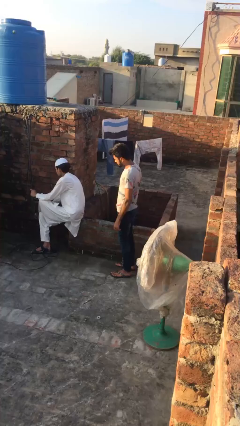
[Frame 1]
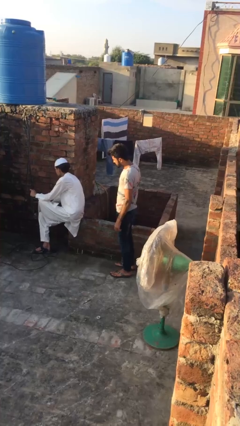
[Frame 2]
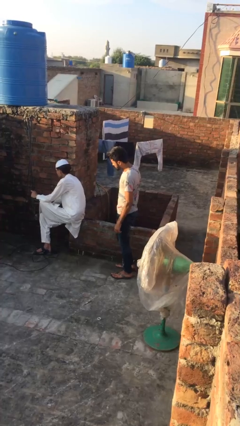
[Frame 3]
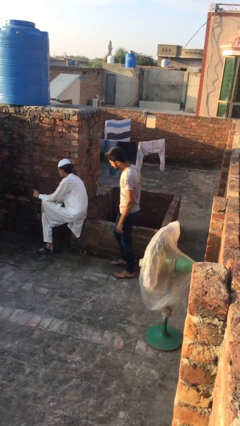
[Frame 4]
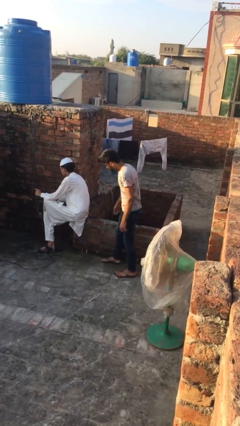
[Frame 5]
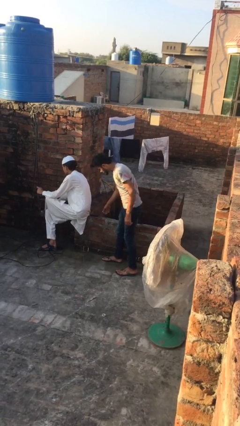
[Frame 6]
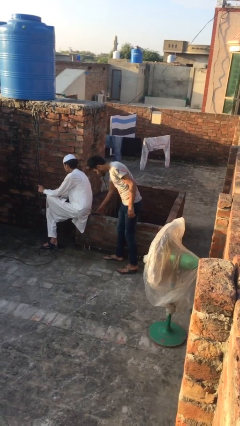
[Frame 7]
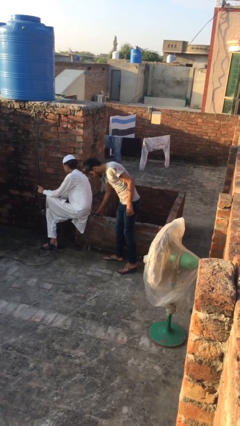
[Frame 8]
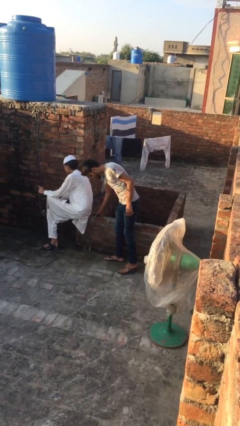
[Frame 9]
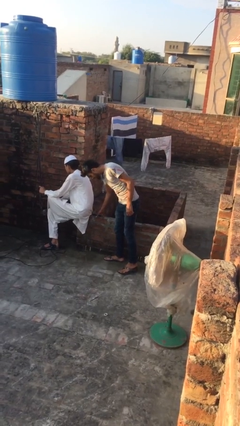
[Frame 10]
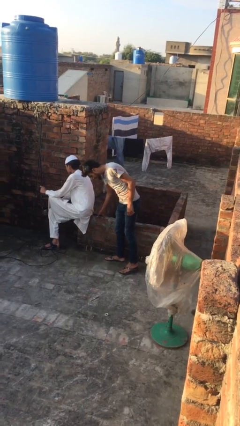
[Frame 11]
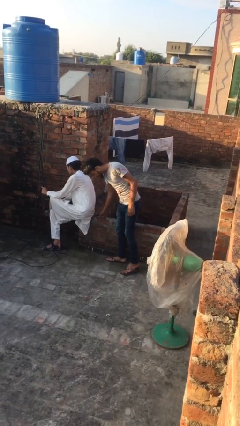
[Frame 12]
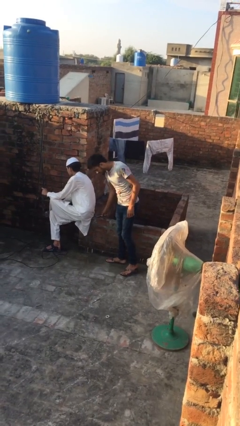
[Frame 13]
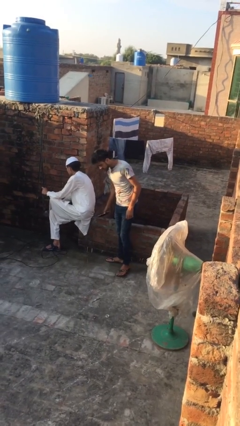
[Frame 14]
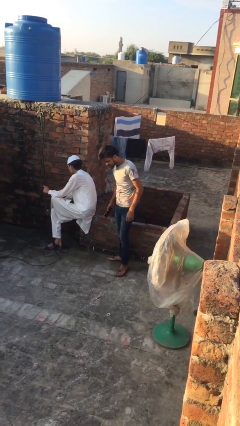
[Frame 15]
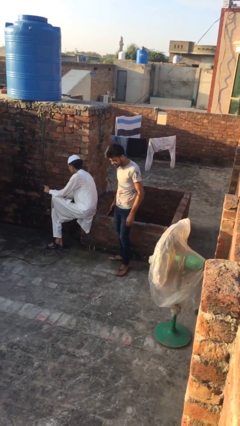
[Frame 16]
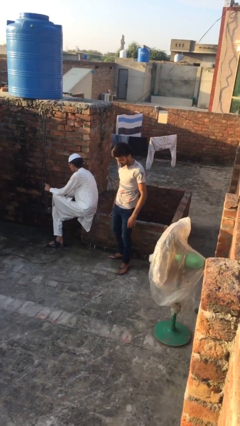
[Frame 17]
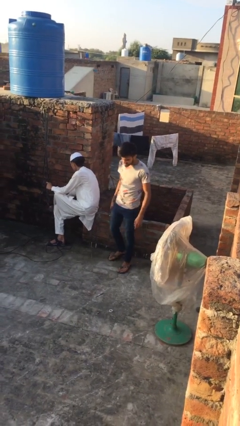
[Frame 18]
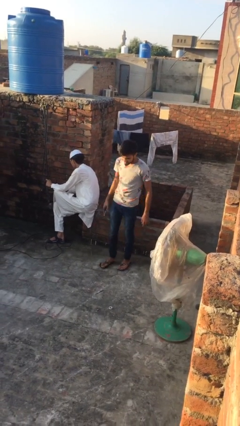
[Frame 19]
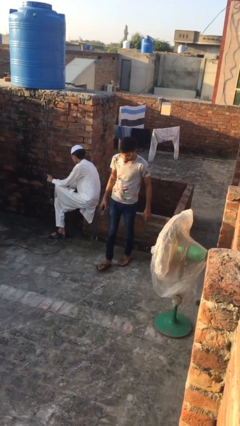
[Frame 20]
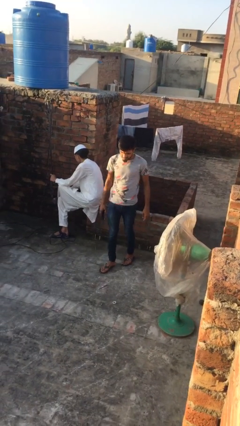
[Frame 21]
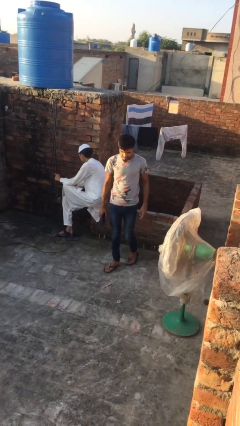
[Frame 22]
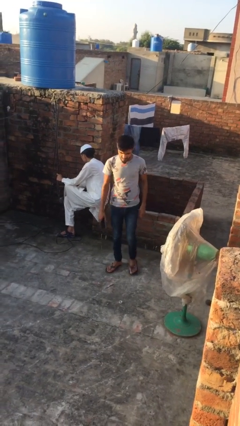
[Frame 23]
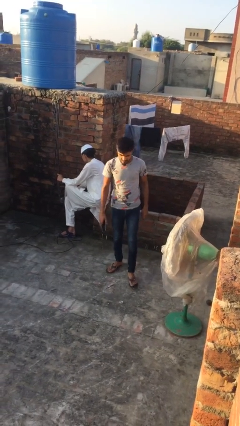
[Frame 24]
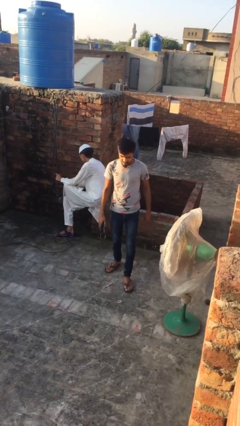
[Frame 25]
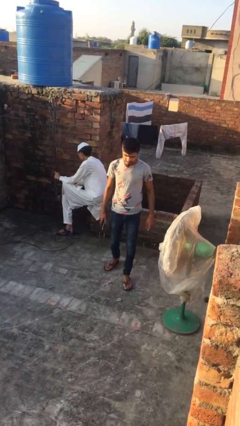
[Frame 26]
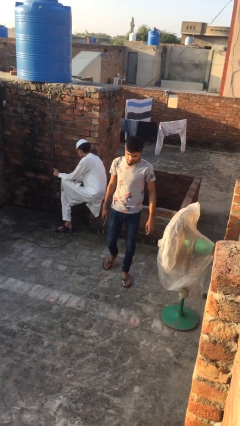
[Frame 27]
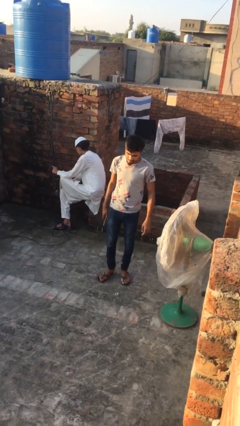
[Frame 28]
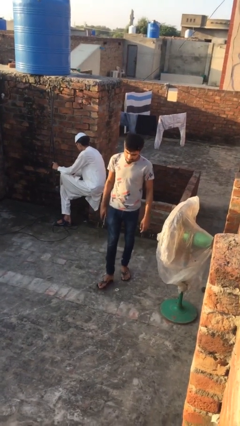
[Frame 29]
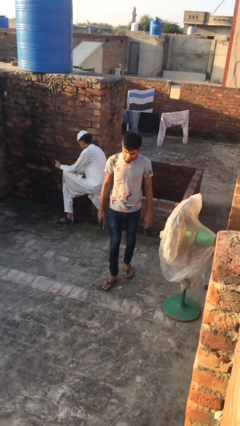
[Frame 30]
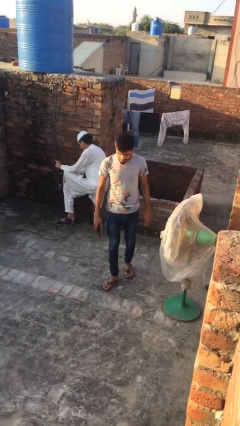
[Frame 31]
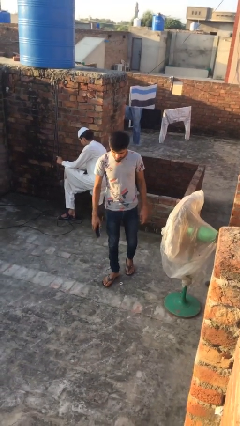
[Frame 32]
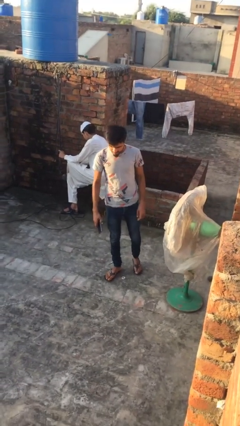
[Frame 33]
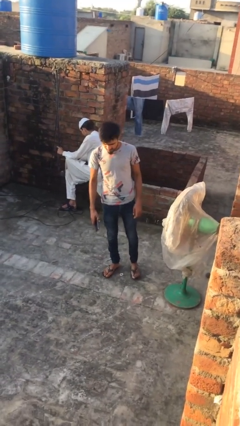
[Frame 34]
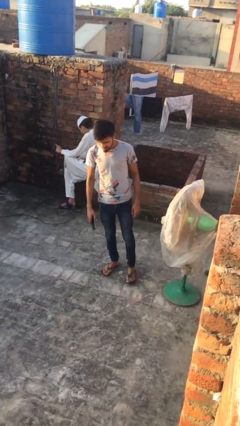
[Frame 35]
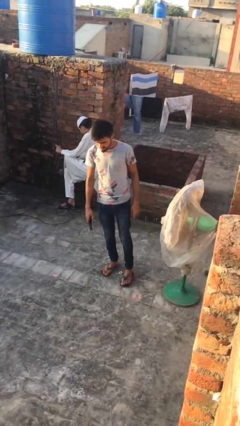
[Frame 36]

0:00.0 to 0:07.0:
person steals object from person

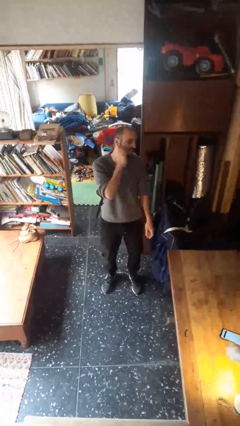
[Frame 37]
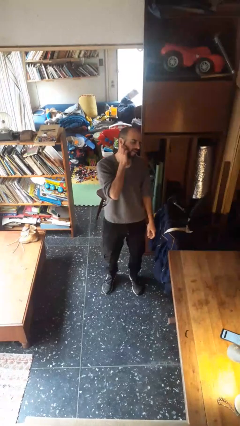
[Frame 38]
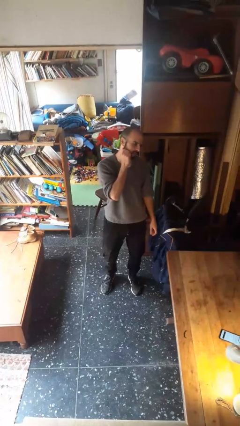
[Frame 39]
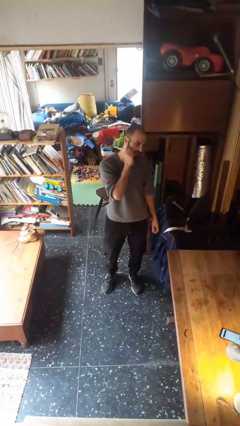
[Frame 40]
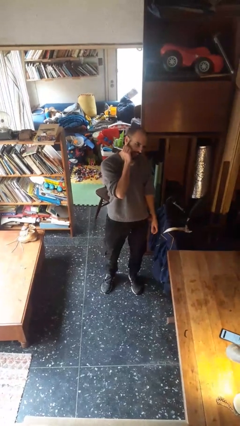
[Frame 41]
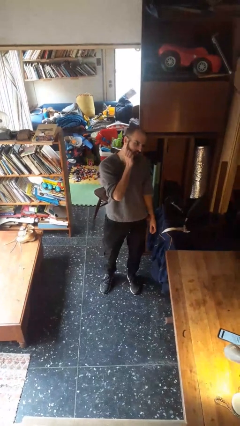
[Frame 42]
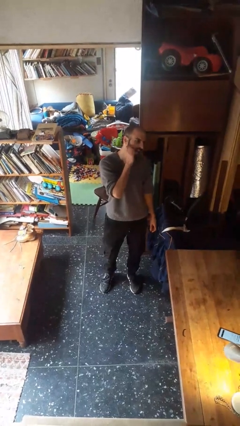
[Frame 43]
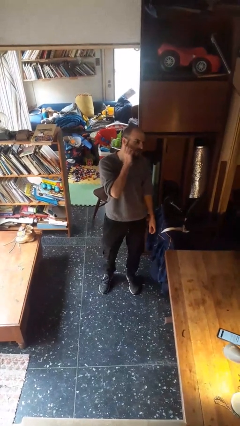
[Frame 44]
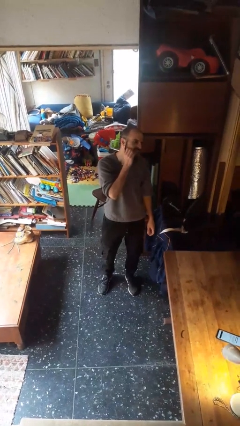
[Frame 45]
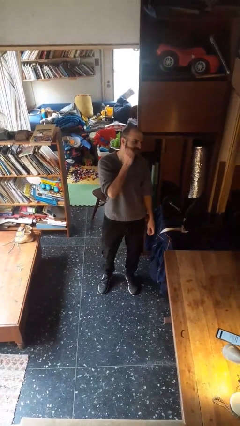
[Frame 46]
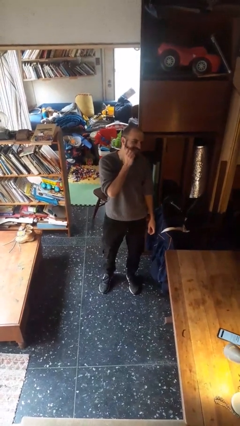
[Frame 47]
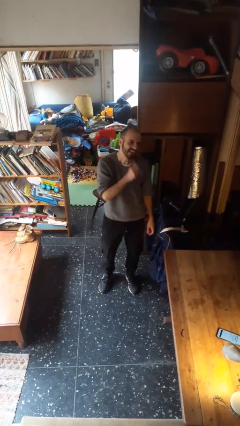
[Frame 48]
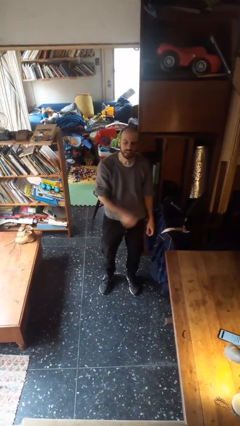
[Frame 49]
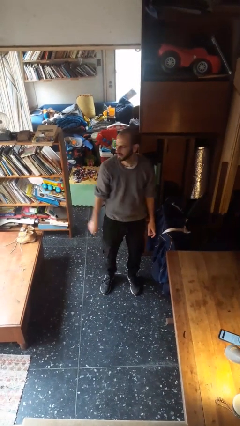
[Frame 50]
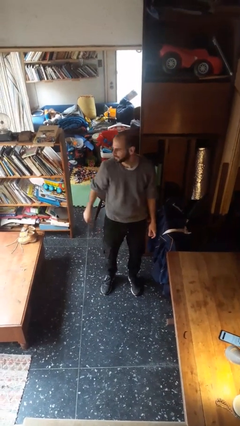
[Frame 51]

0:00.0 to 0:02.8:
person scratches face

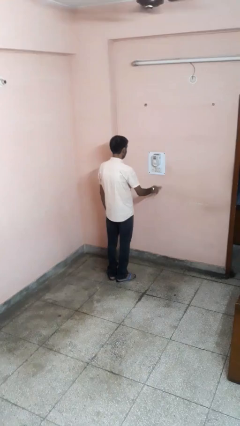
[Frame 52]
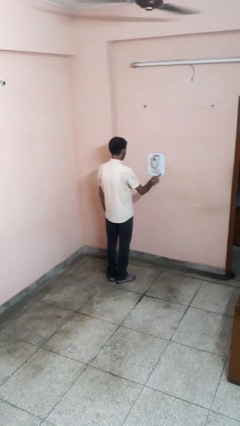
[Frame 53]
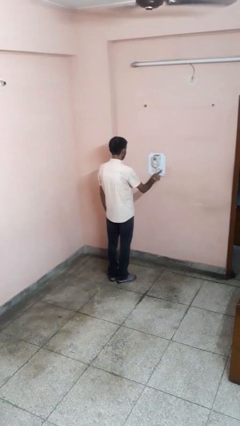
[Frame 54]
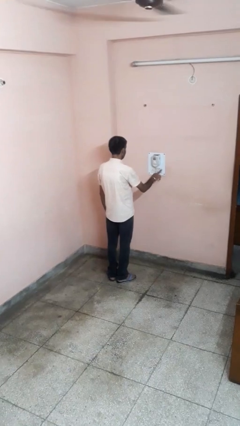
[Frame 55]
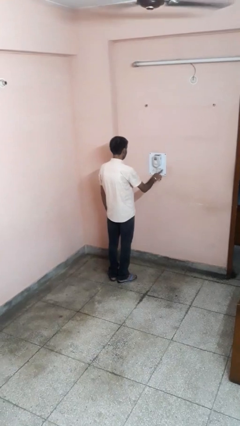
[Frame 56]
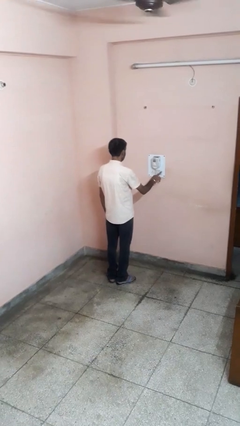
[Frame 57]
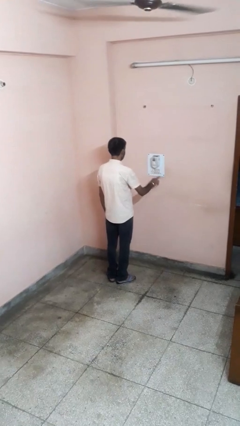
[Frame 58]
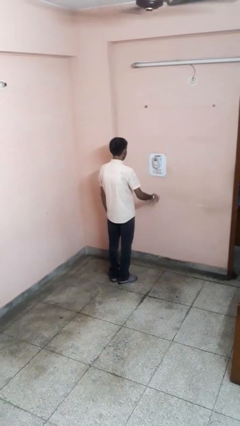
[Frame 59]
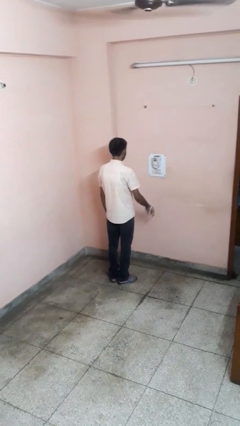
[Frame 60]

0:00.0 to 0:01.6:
person turns off fan

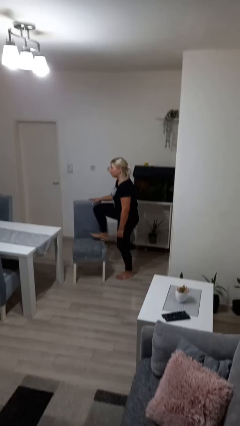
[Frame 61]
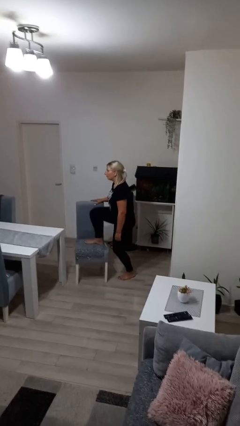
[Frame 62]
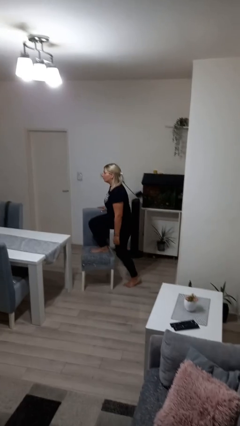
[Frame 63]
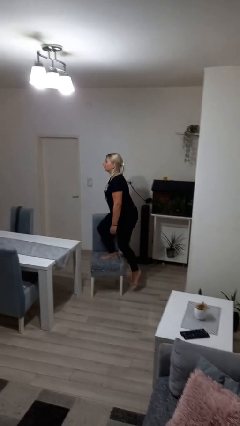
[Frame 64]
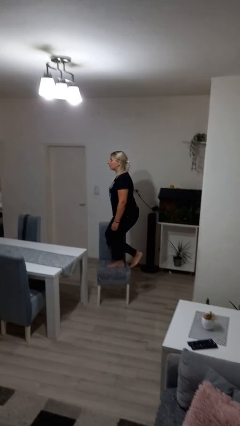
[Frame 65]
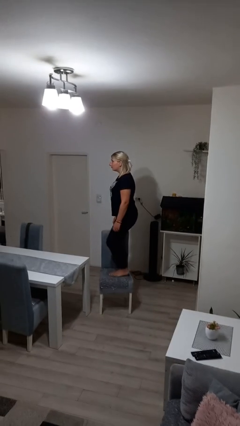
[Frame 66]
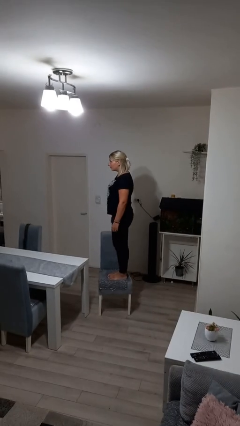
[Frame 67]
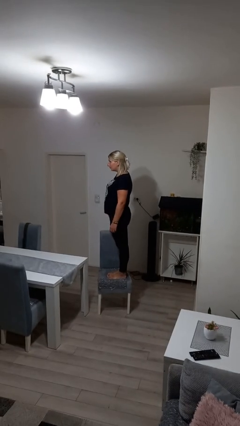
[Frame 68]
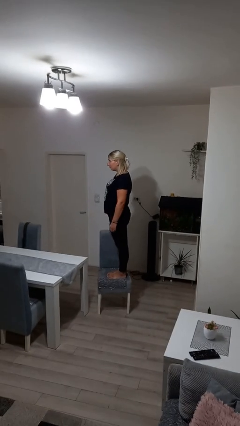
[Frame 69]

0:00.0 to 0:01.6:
person climbs on chair

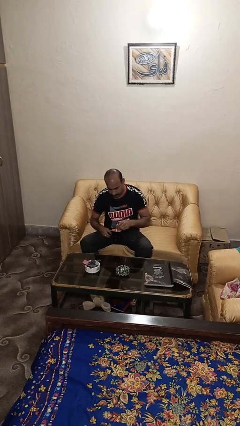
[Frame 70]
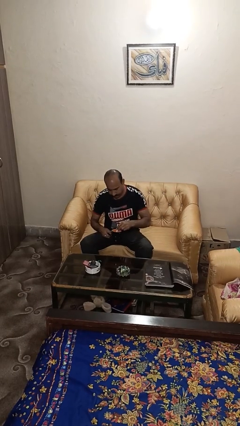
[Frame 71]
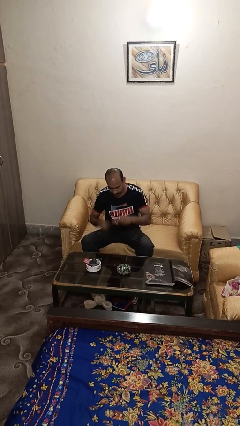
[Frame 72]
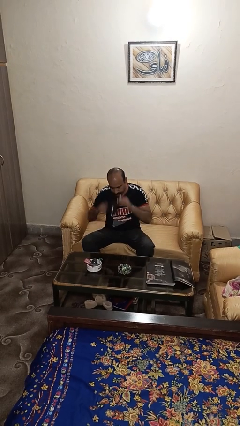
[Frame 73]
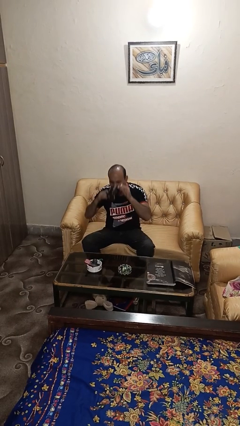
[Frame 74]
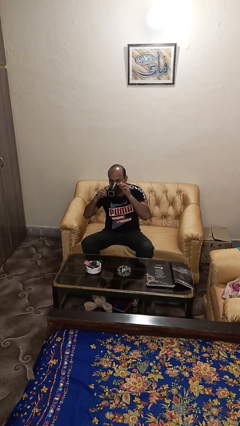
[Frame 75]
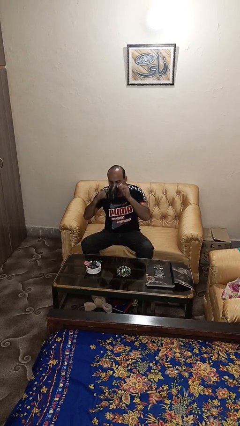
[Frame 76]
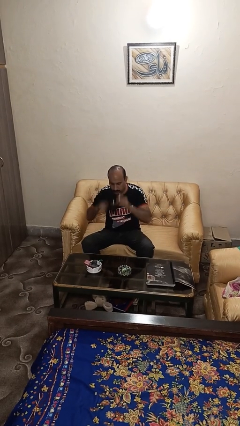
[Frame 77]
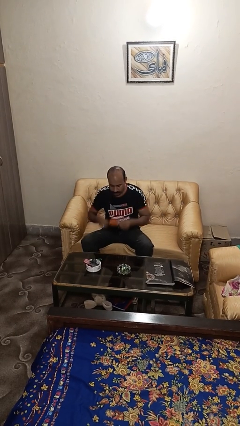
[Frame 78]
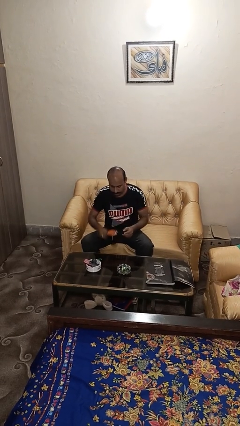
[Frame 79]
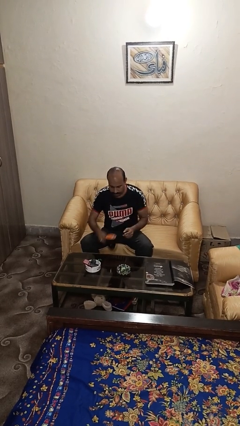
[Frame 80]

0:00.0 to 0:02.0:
person drinks from mug

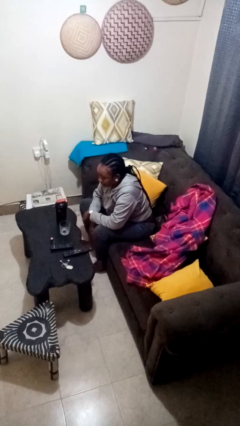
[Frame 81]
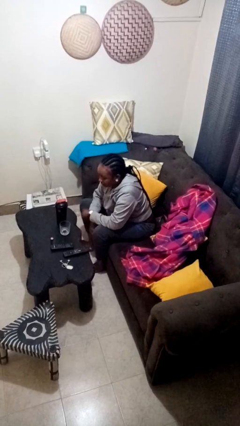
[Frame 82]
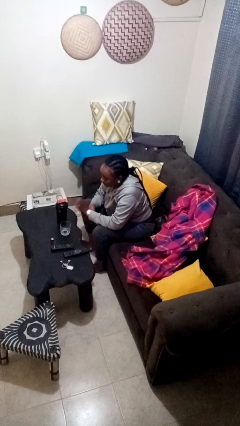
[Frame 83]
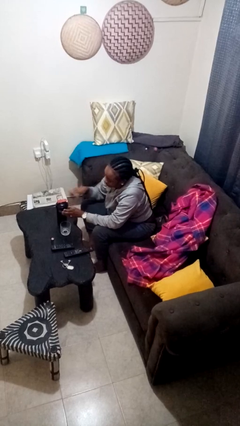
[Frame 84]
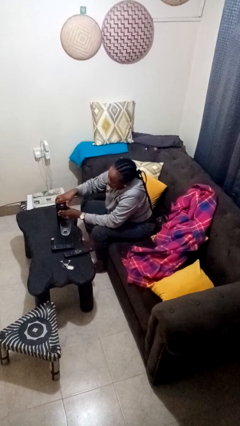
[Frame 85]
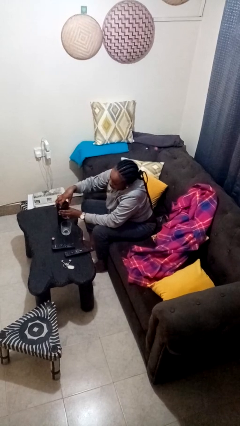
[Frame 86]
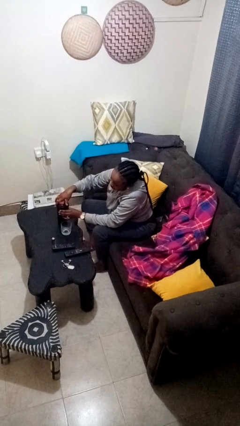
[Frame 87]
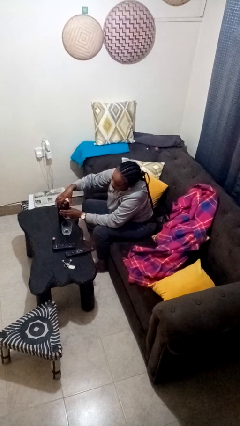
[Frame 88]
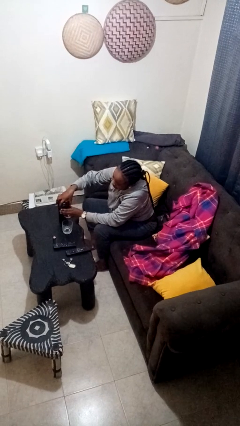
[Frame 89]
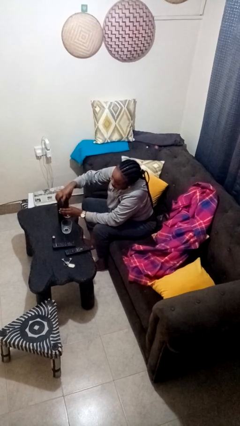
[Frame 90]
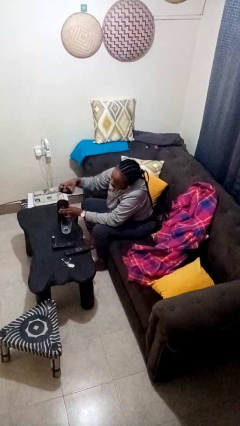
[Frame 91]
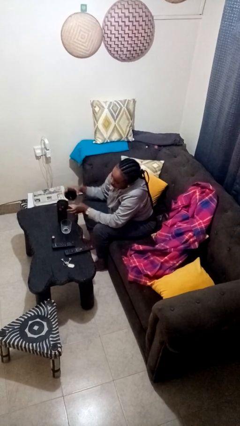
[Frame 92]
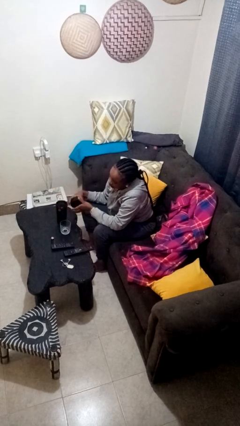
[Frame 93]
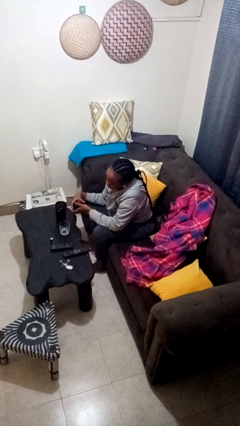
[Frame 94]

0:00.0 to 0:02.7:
person unscrews lid from bottle
